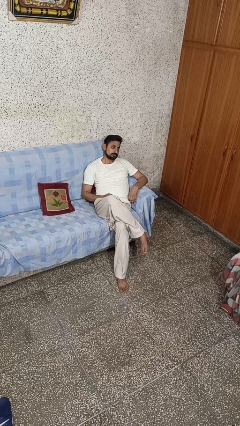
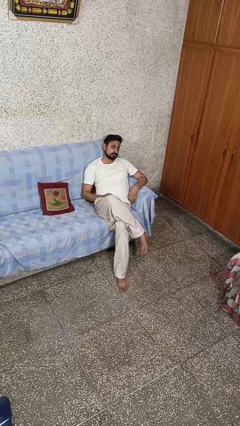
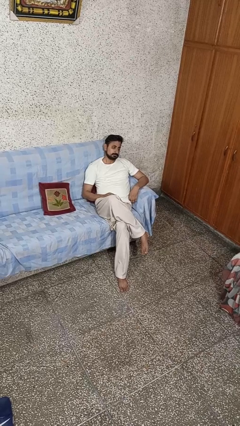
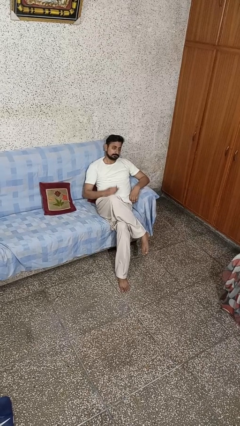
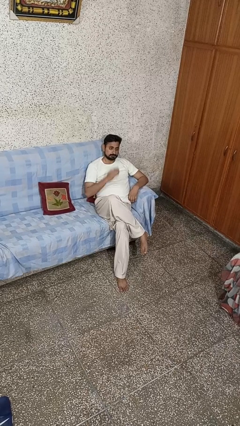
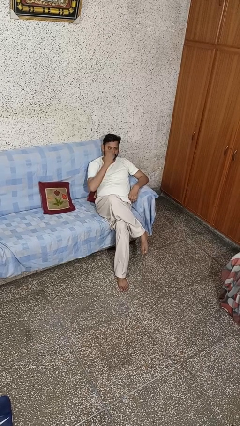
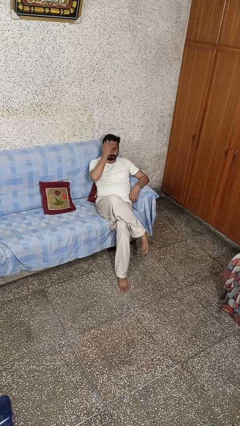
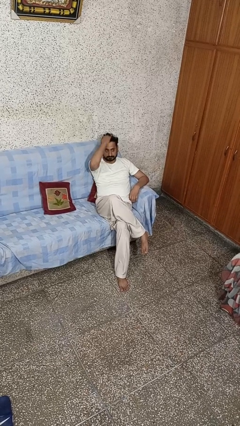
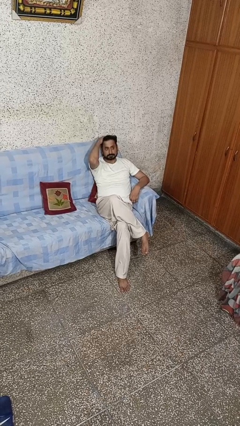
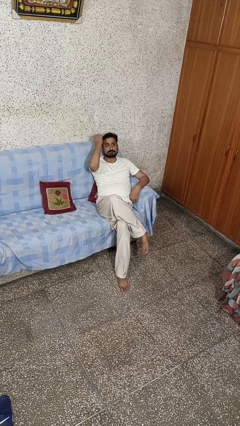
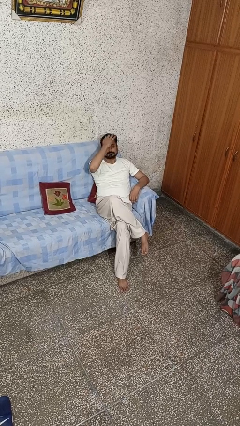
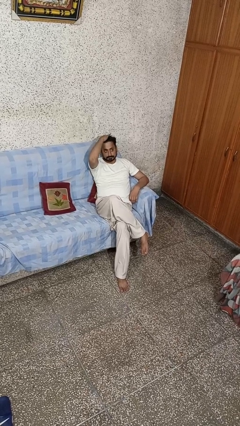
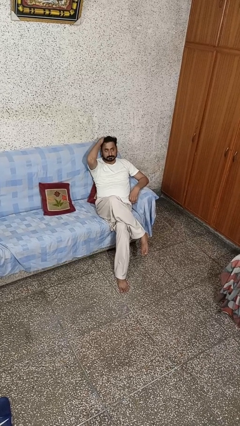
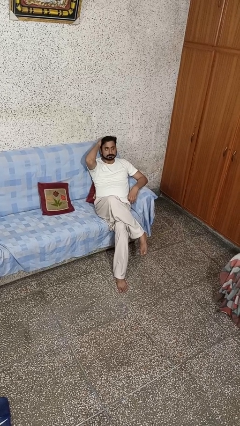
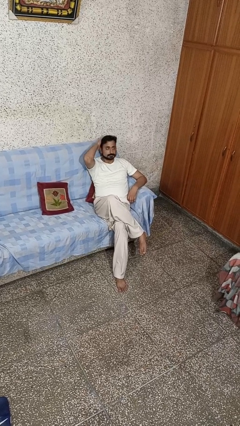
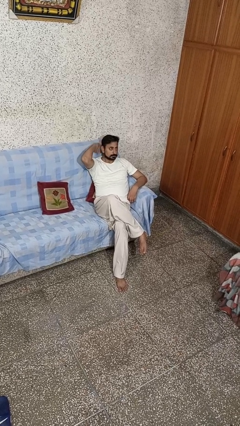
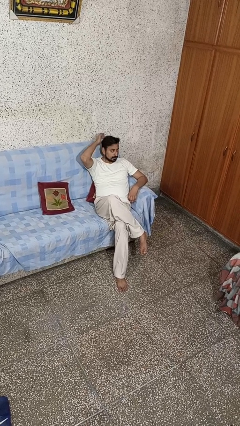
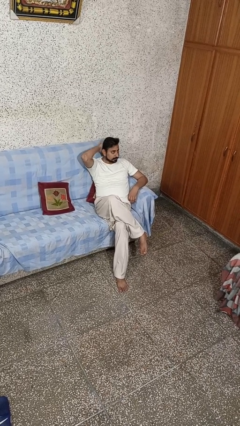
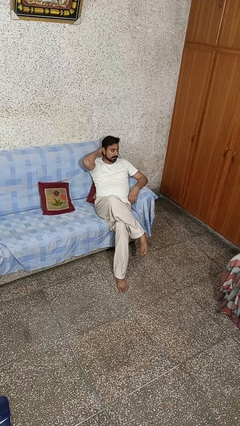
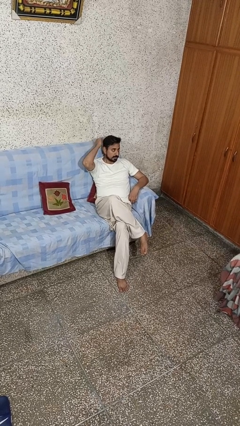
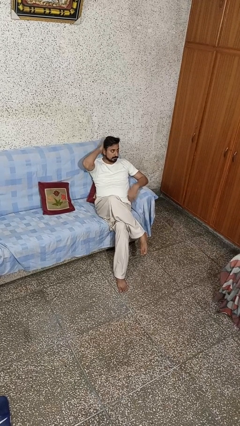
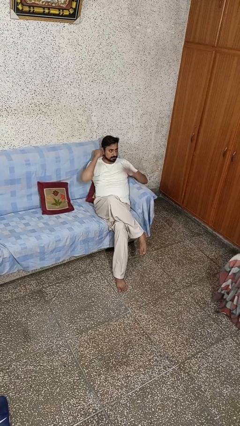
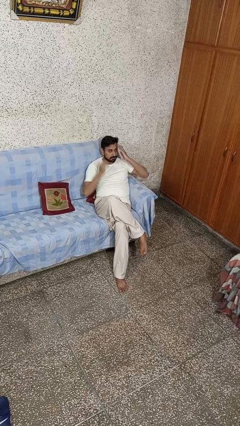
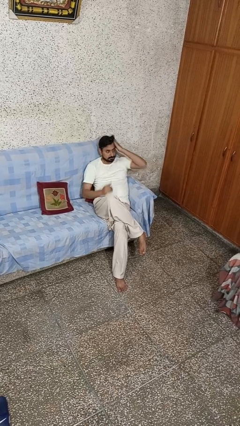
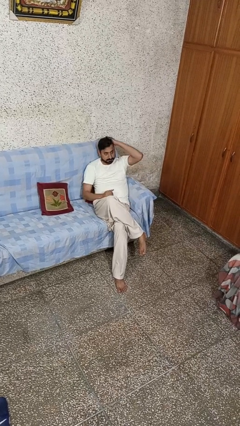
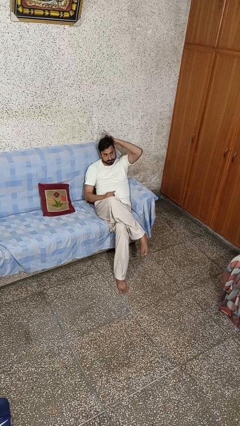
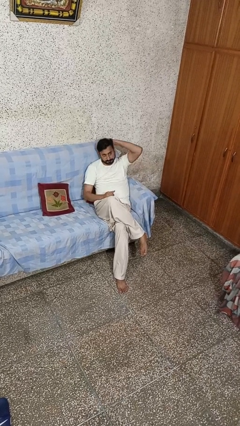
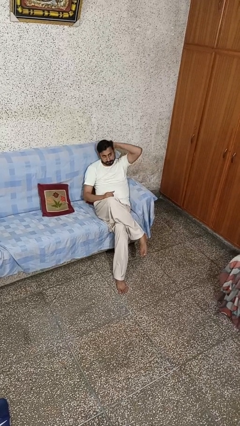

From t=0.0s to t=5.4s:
person strokes hair

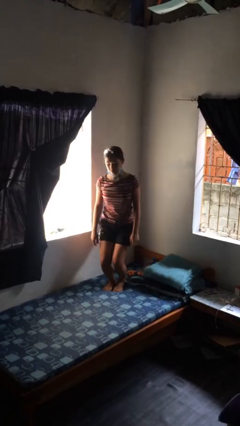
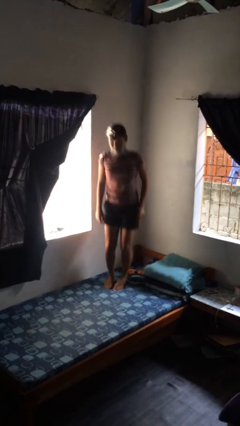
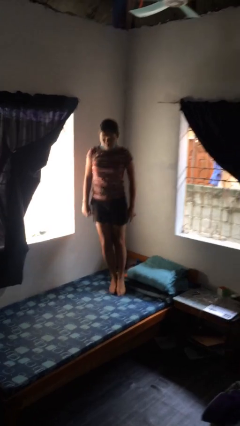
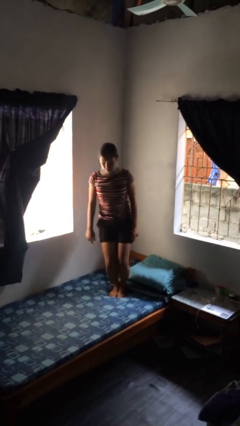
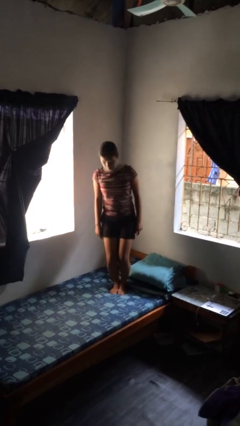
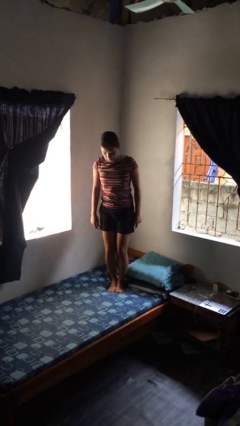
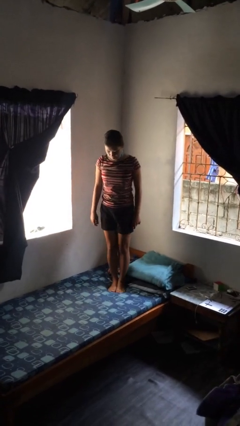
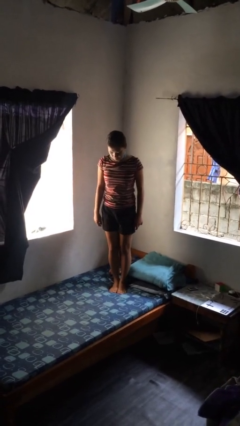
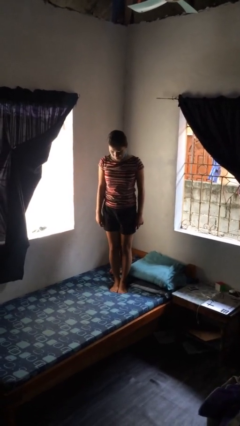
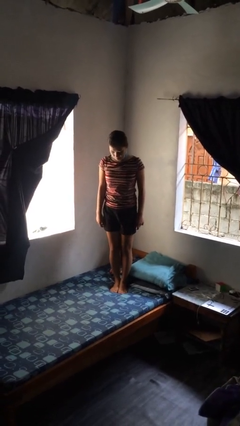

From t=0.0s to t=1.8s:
person jumps on bed

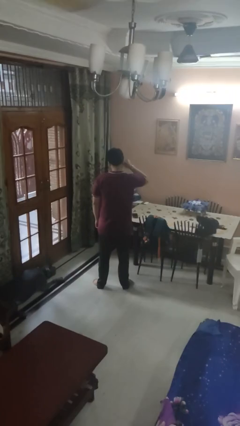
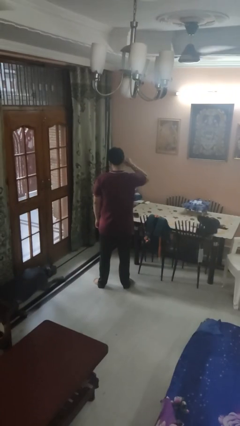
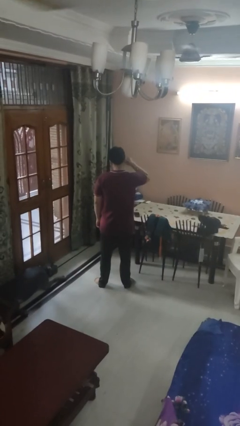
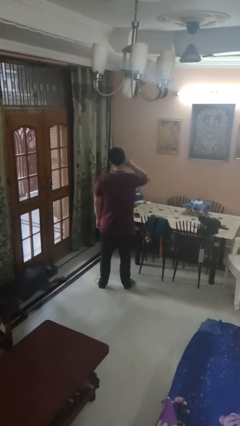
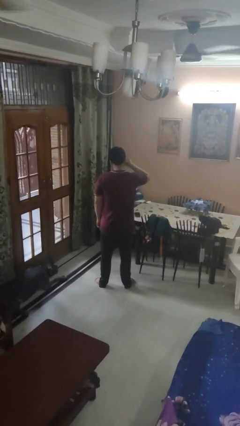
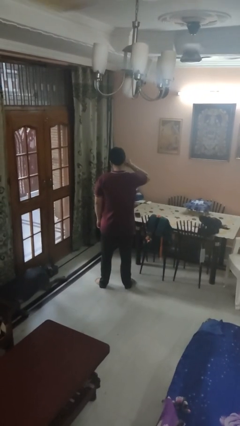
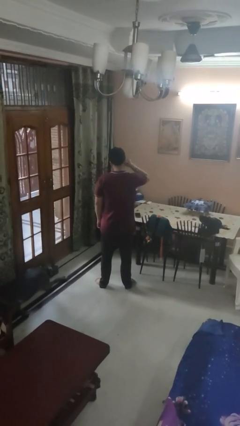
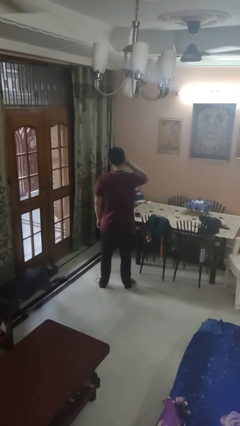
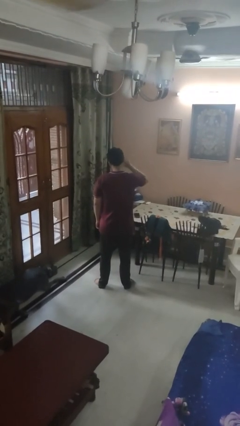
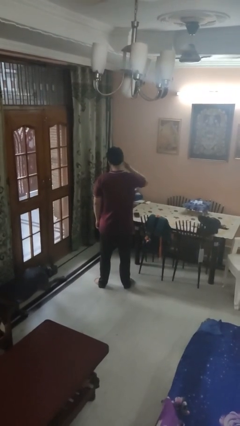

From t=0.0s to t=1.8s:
person touches earlobe

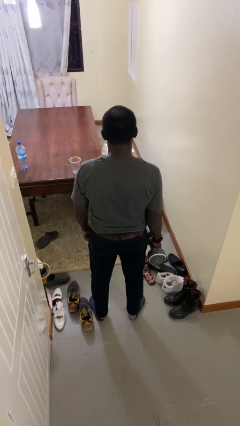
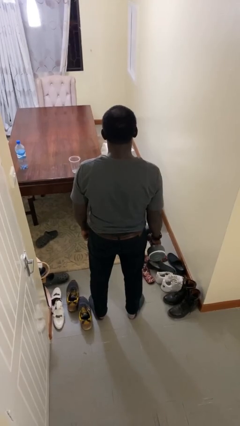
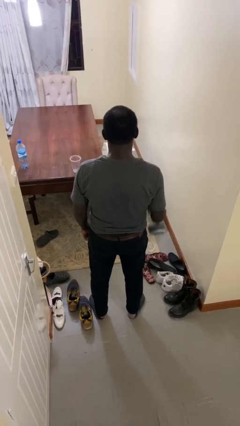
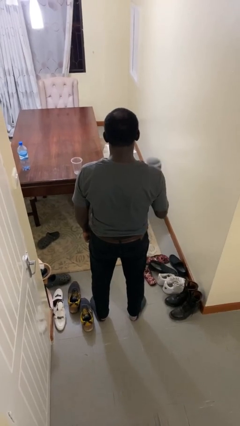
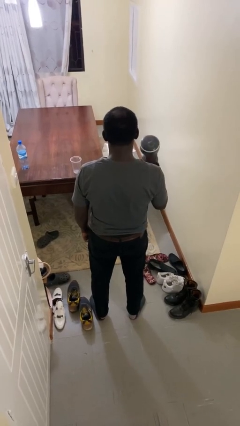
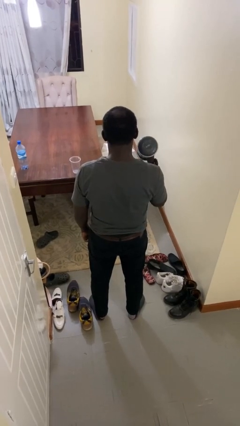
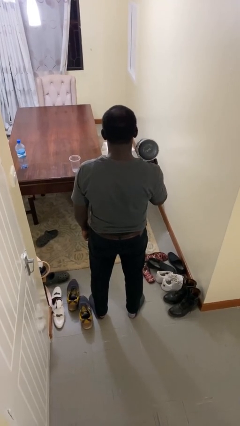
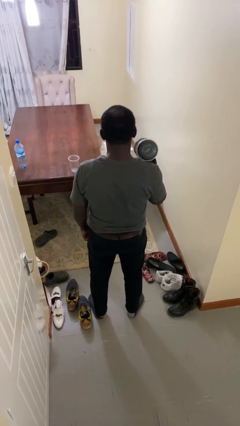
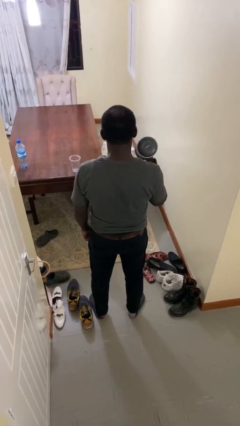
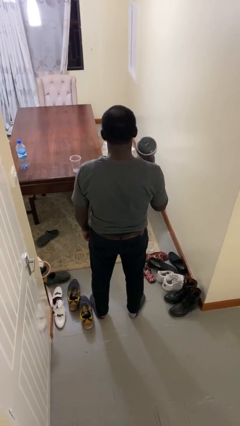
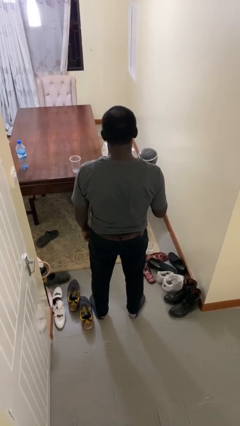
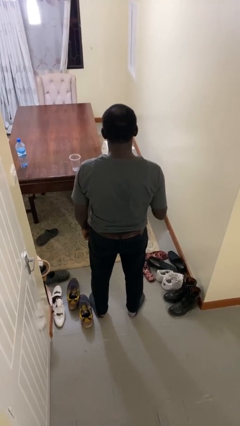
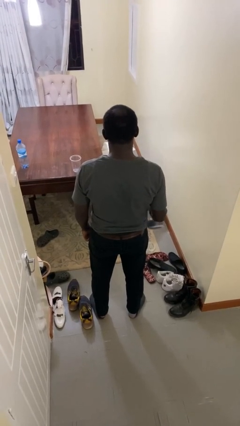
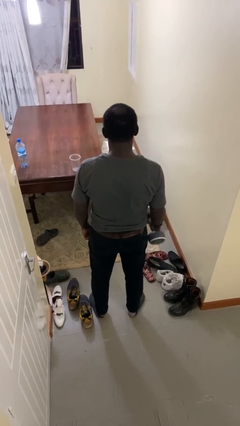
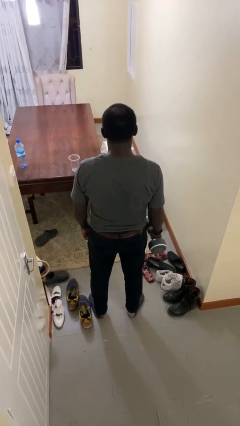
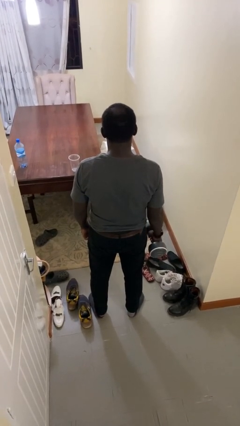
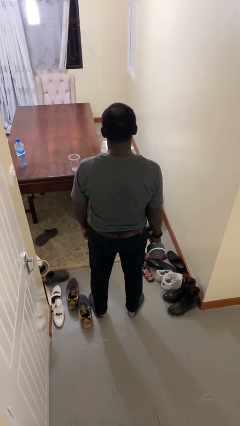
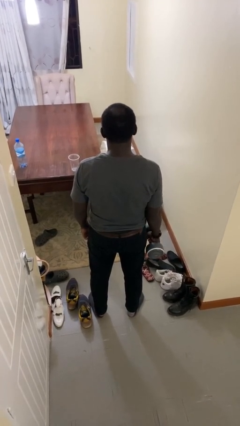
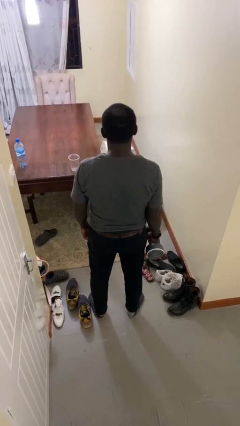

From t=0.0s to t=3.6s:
person lifts dumbbells

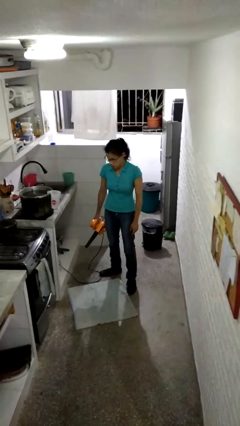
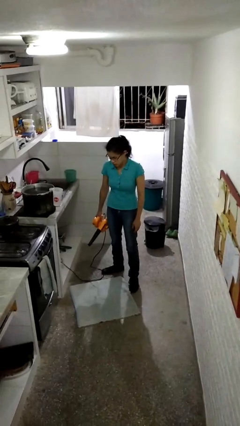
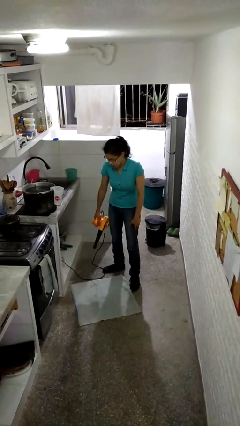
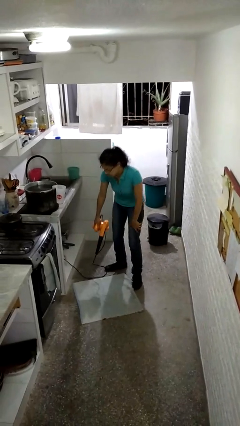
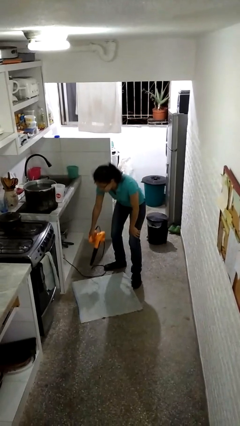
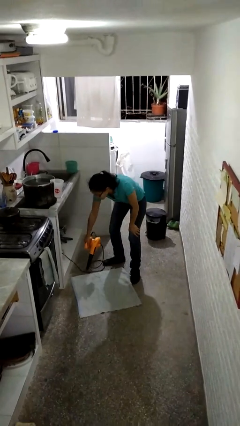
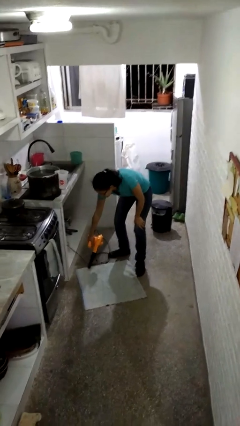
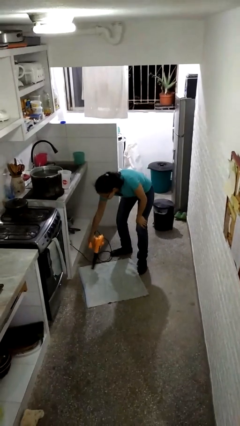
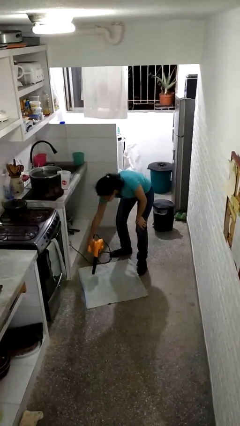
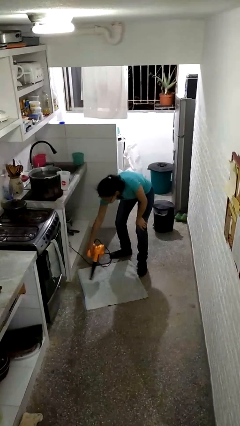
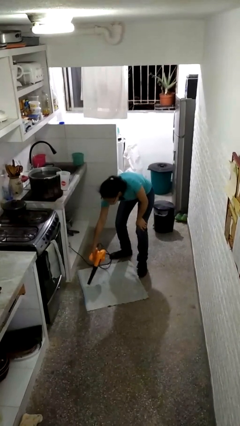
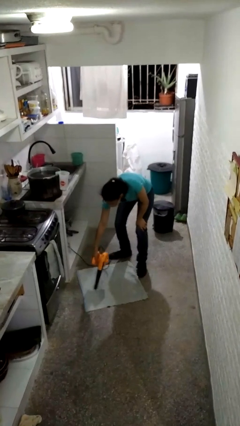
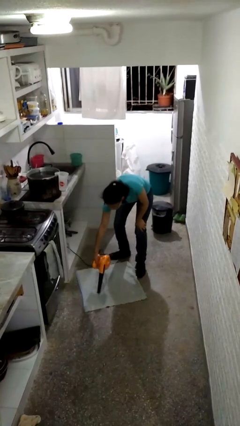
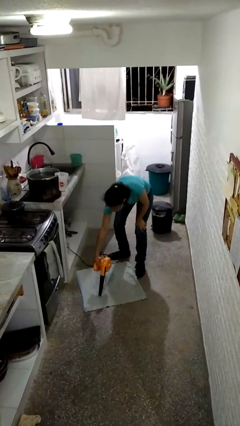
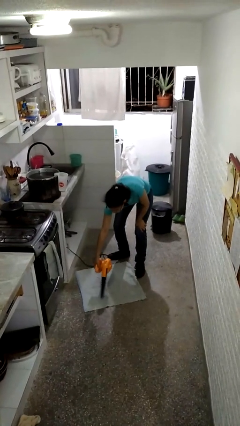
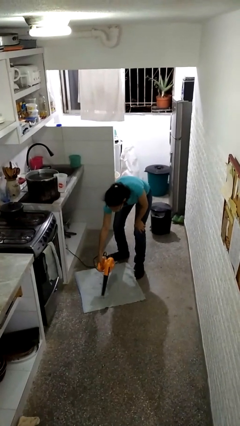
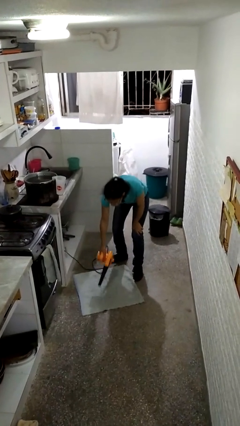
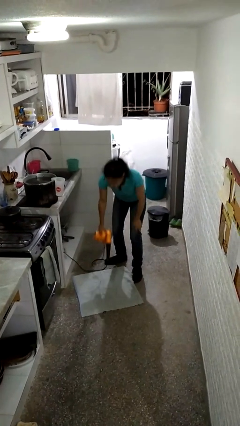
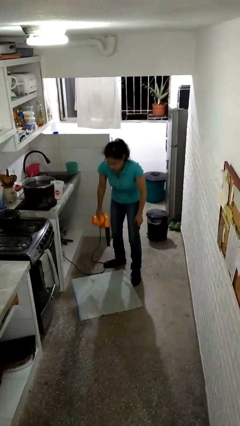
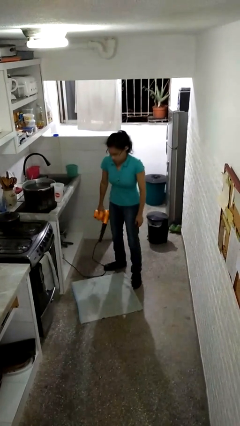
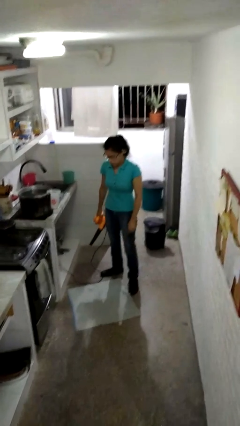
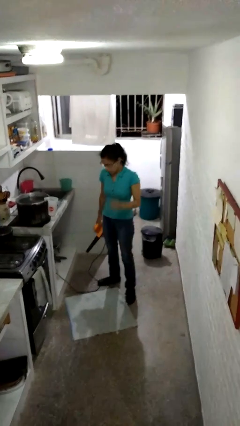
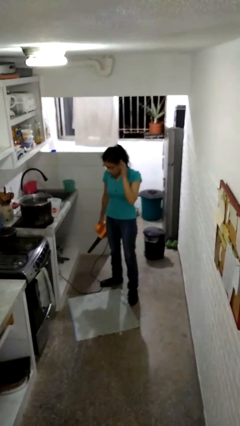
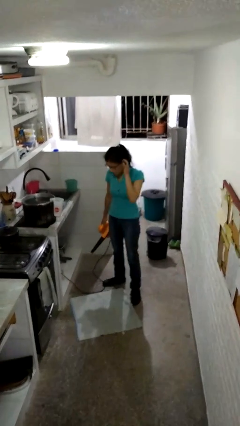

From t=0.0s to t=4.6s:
person vacuums carpet

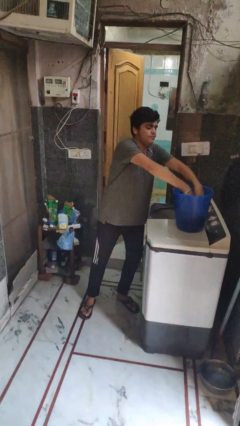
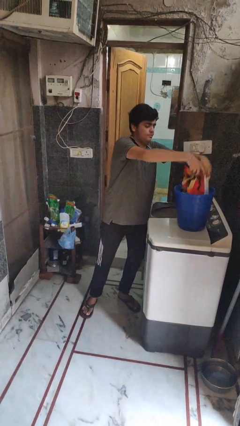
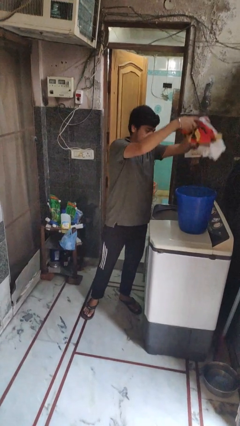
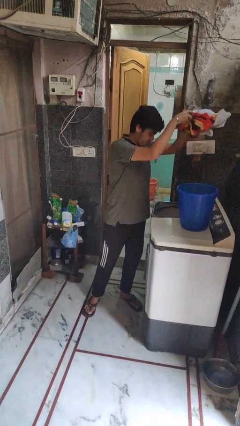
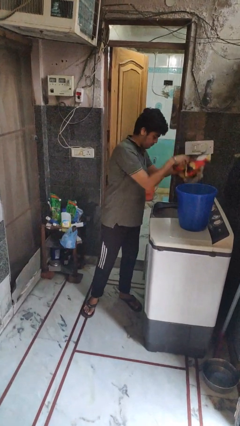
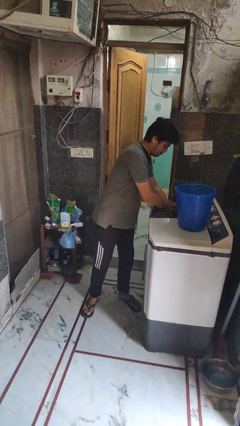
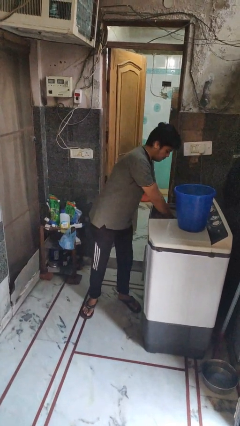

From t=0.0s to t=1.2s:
person loads clotheswasher
